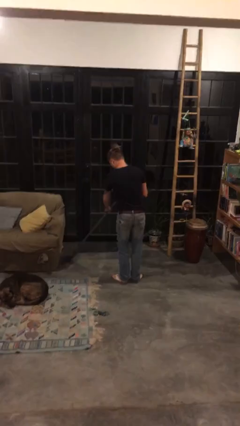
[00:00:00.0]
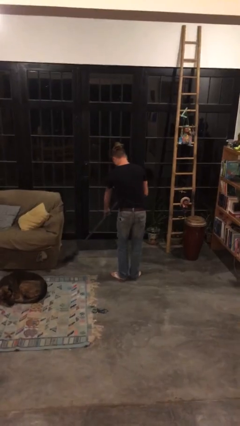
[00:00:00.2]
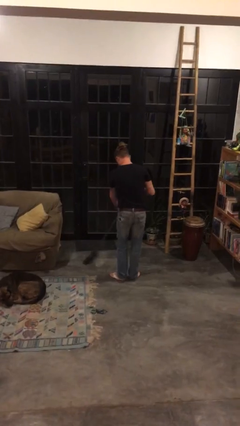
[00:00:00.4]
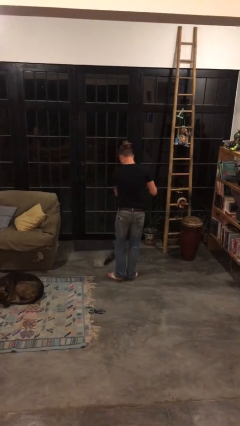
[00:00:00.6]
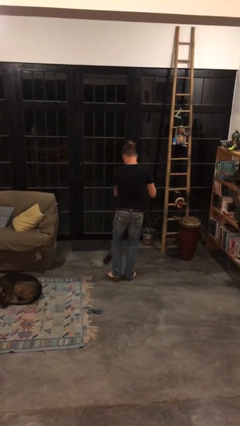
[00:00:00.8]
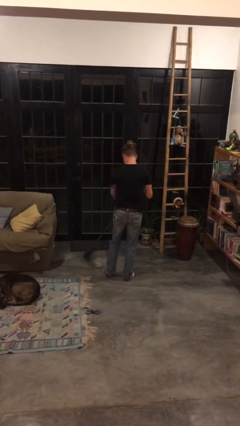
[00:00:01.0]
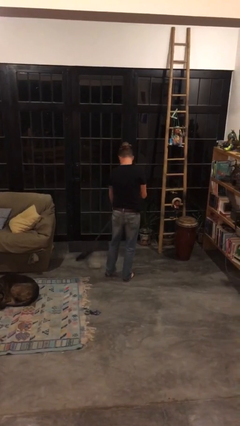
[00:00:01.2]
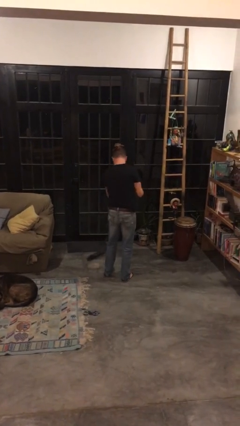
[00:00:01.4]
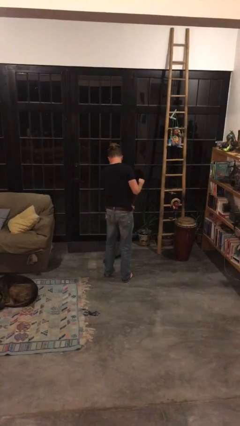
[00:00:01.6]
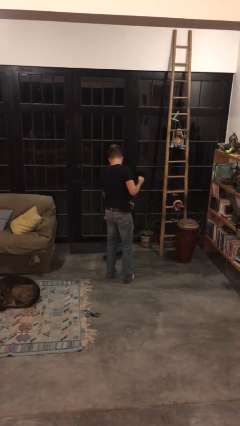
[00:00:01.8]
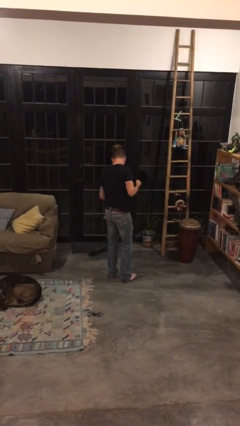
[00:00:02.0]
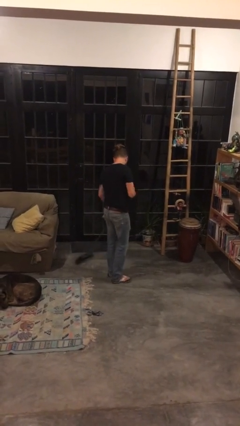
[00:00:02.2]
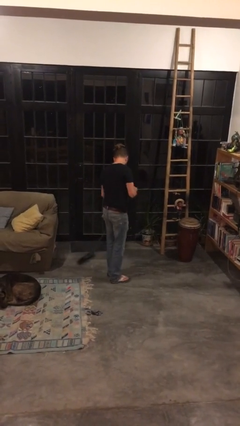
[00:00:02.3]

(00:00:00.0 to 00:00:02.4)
person sweeps floor

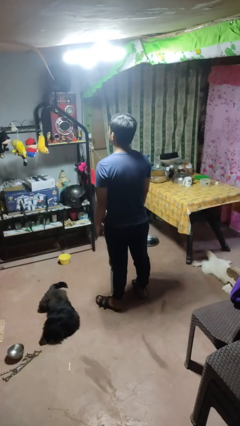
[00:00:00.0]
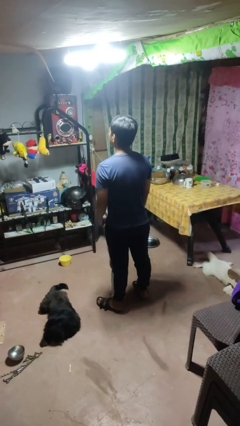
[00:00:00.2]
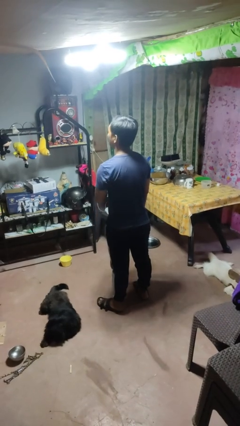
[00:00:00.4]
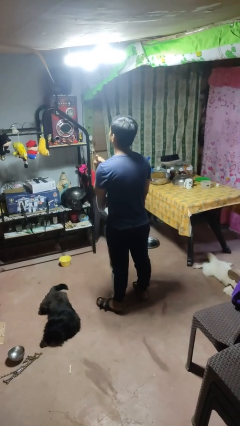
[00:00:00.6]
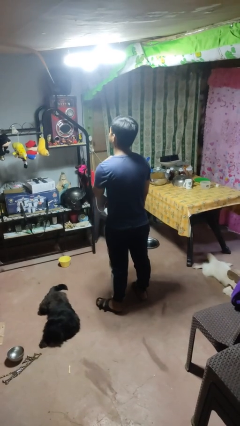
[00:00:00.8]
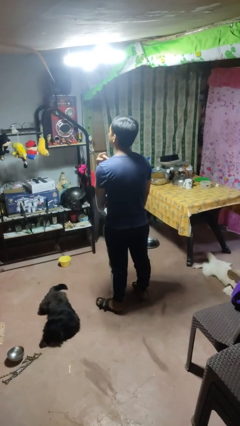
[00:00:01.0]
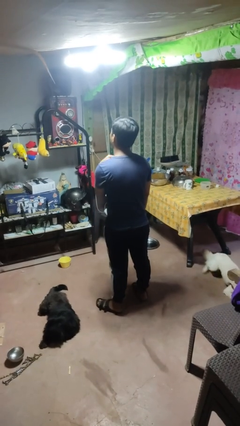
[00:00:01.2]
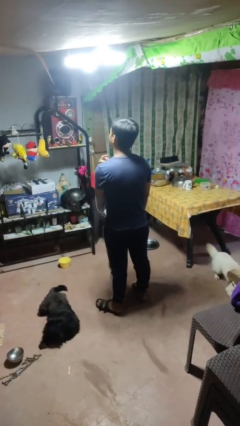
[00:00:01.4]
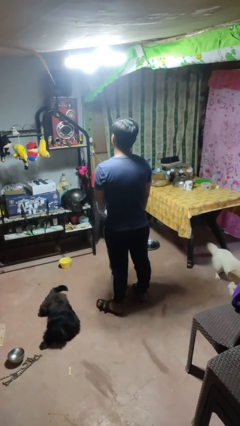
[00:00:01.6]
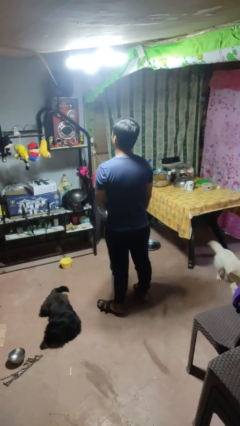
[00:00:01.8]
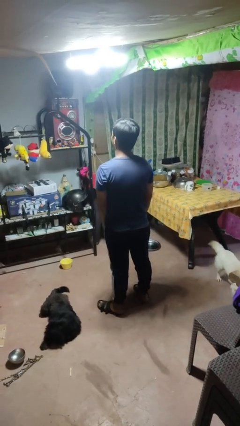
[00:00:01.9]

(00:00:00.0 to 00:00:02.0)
person gestures cut

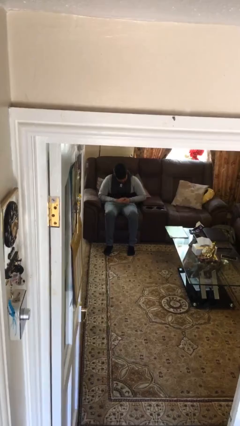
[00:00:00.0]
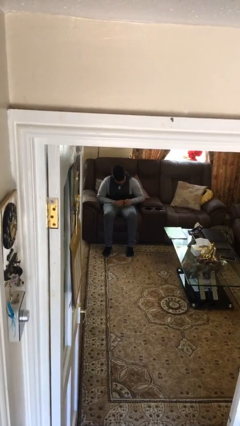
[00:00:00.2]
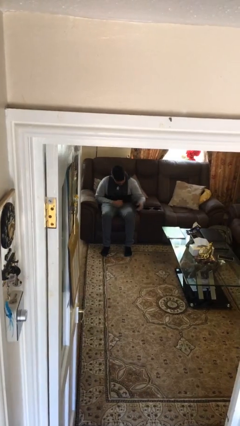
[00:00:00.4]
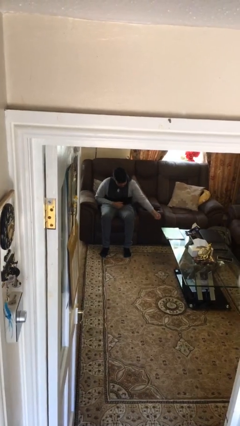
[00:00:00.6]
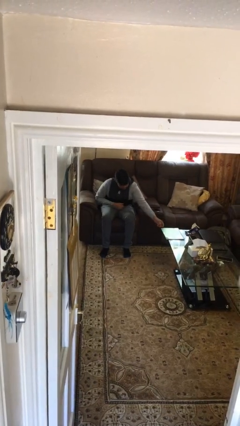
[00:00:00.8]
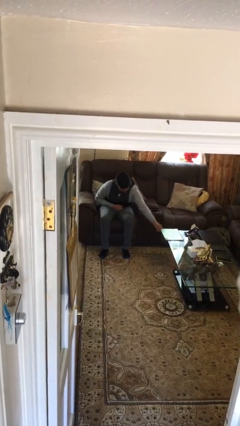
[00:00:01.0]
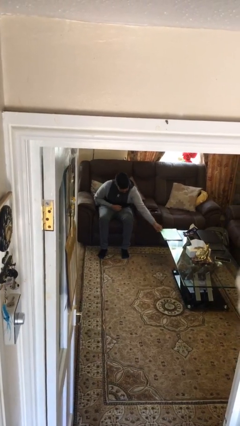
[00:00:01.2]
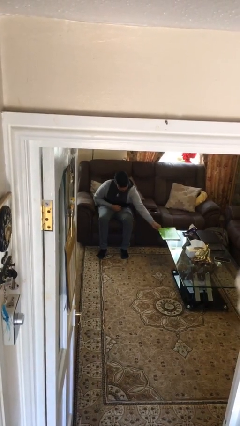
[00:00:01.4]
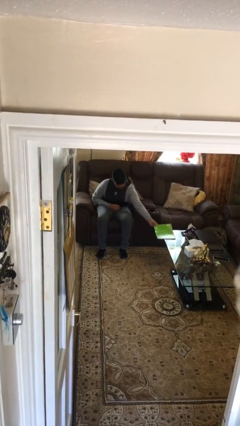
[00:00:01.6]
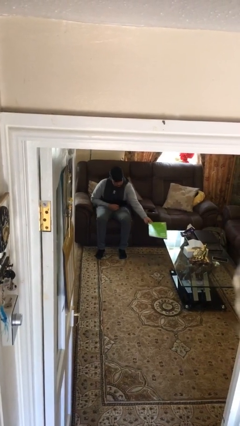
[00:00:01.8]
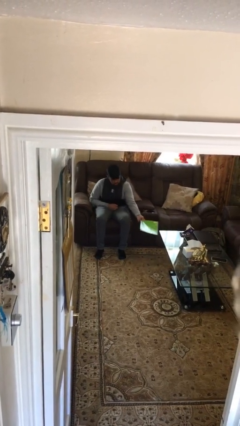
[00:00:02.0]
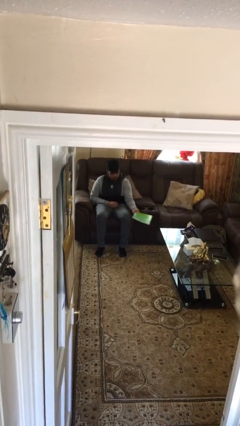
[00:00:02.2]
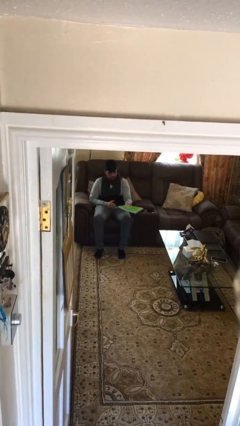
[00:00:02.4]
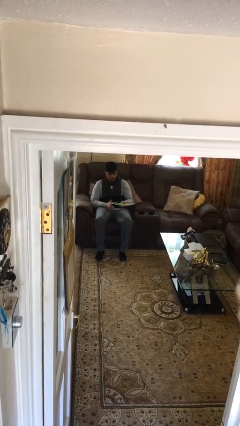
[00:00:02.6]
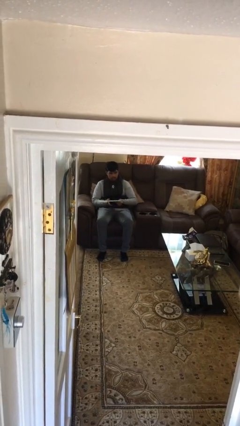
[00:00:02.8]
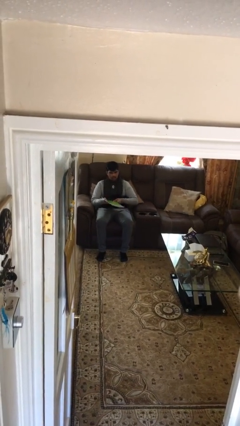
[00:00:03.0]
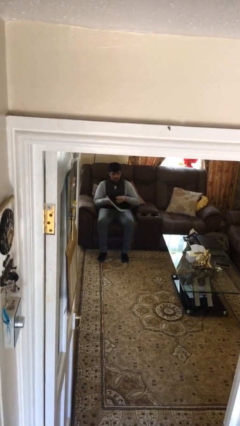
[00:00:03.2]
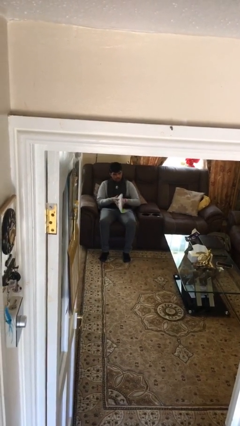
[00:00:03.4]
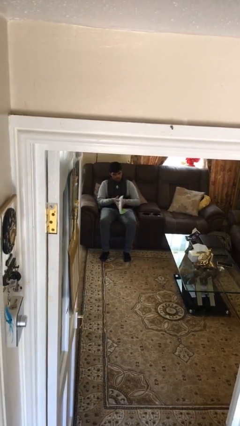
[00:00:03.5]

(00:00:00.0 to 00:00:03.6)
person picks up object from table

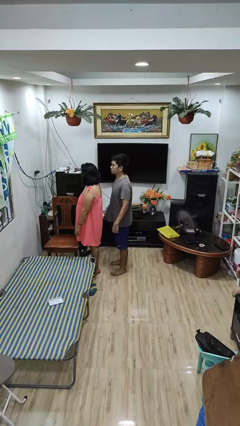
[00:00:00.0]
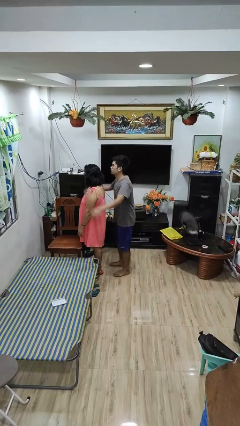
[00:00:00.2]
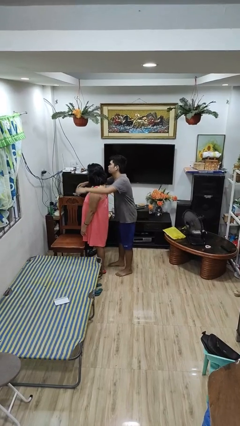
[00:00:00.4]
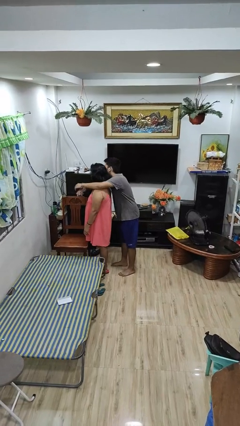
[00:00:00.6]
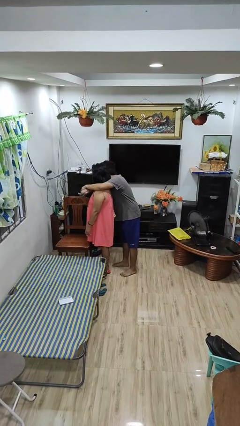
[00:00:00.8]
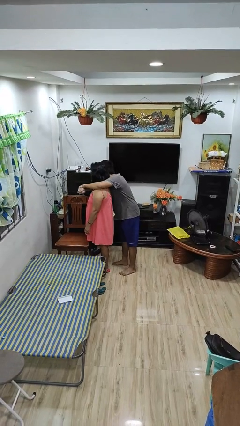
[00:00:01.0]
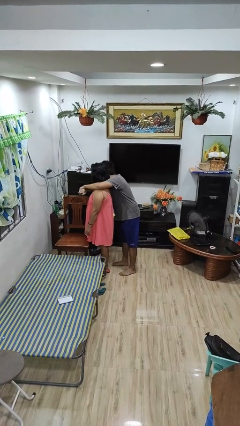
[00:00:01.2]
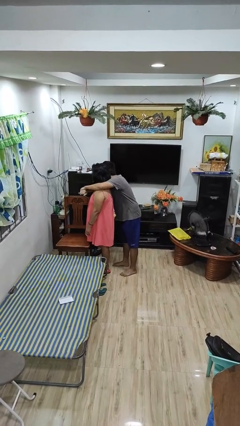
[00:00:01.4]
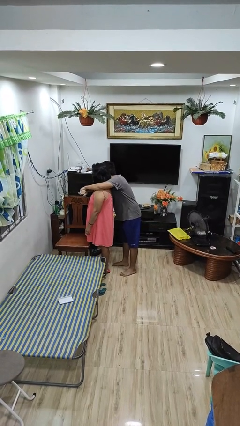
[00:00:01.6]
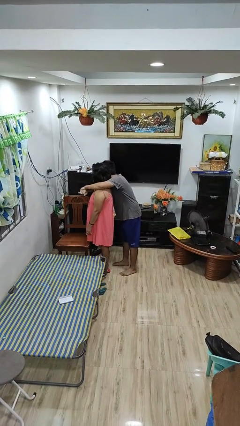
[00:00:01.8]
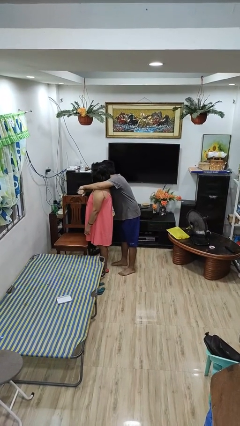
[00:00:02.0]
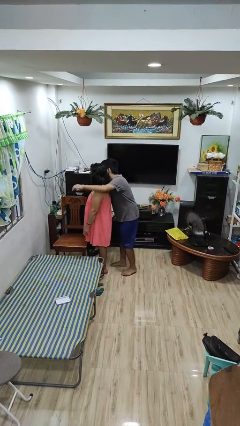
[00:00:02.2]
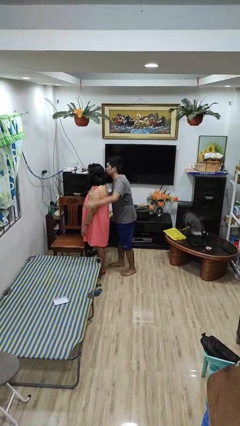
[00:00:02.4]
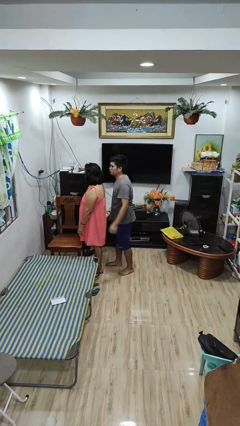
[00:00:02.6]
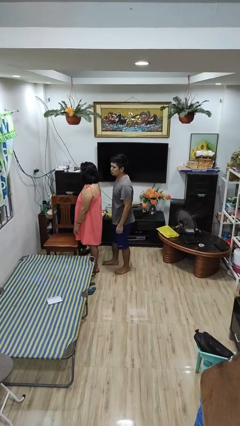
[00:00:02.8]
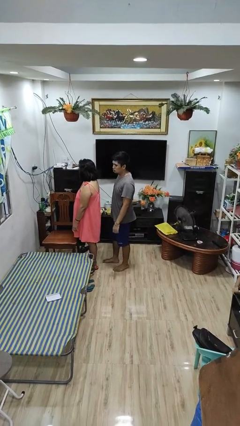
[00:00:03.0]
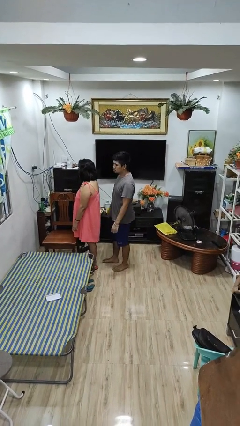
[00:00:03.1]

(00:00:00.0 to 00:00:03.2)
person hugs person from behind

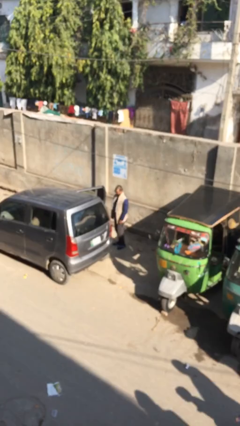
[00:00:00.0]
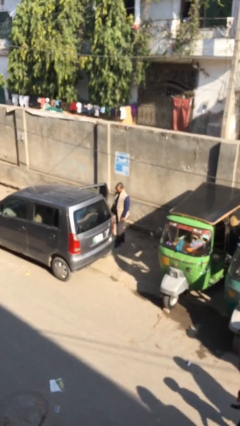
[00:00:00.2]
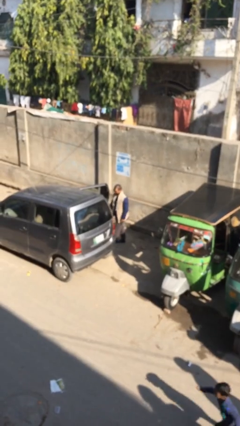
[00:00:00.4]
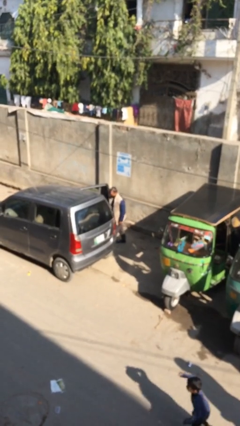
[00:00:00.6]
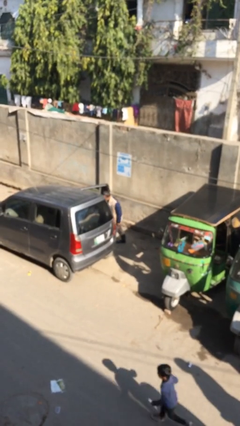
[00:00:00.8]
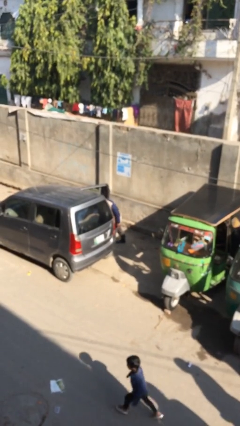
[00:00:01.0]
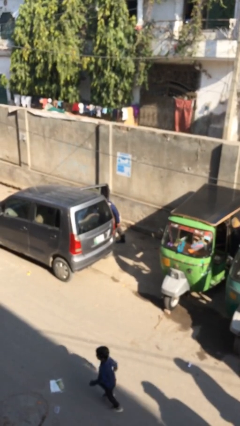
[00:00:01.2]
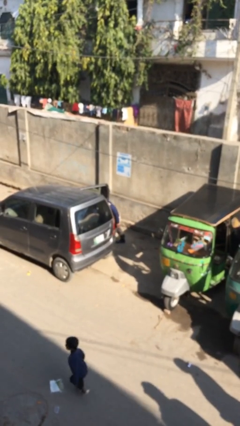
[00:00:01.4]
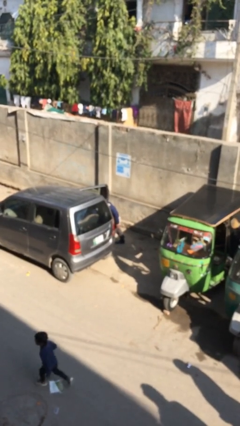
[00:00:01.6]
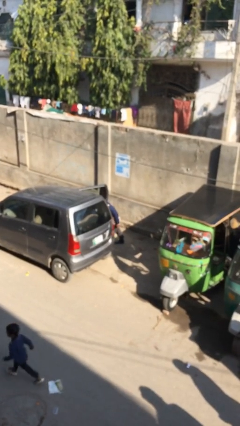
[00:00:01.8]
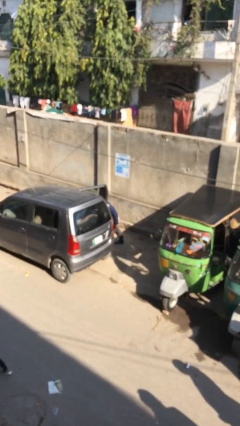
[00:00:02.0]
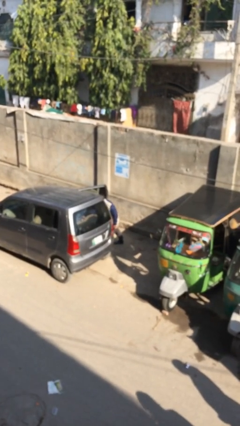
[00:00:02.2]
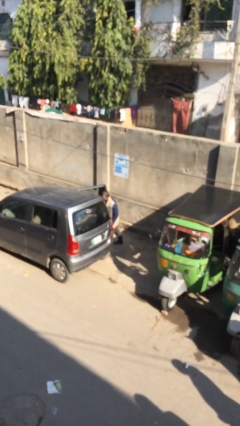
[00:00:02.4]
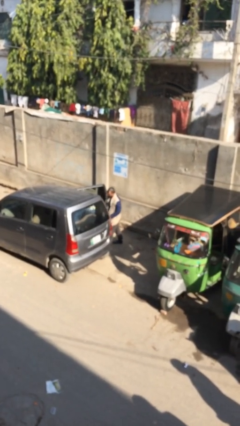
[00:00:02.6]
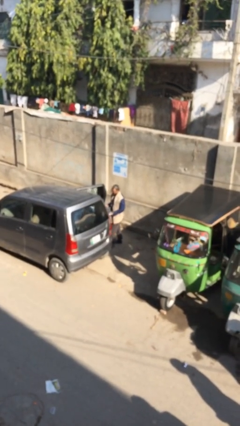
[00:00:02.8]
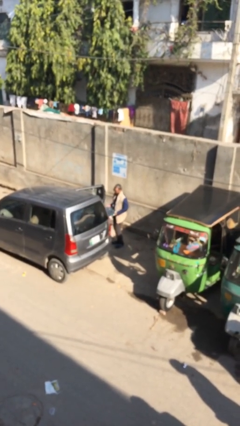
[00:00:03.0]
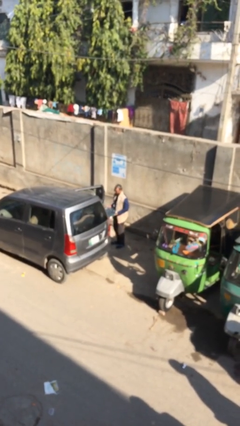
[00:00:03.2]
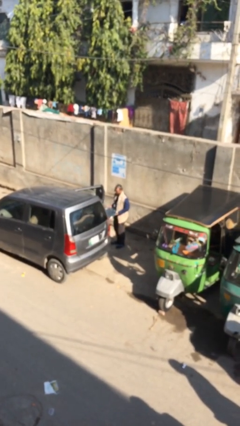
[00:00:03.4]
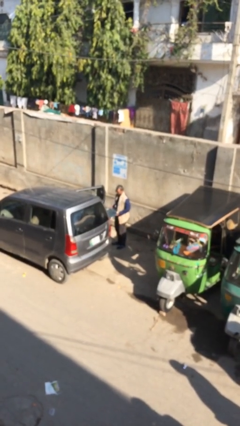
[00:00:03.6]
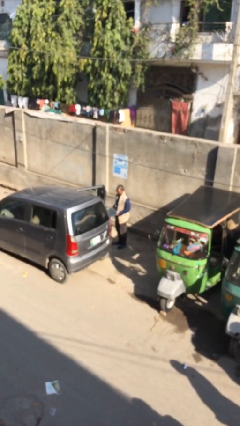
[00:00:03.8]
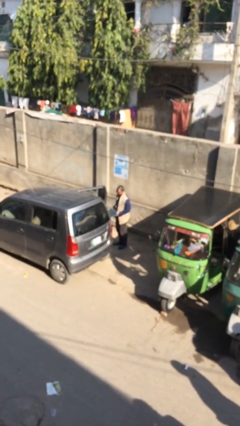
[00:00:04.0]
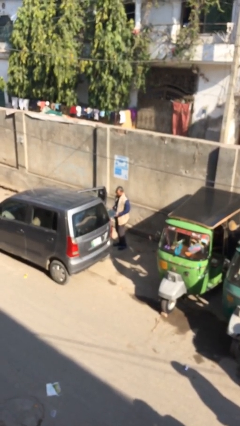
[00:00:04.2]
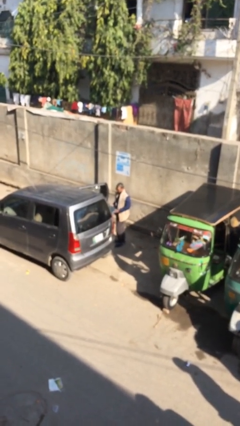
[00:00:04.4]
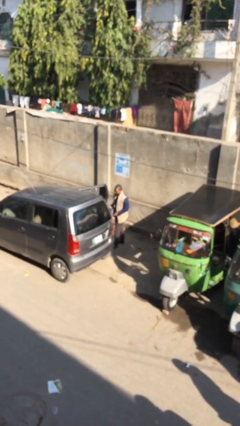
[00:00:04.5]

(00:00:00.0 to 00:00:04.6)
person unloads car

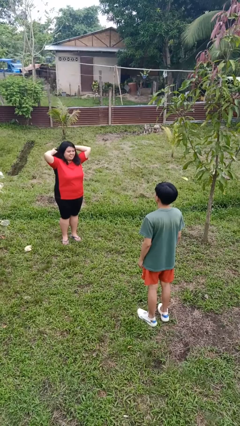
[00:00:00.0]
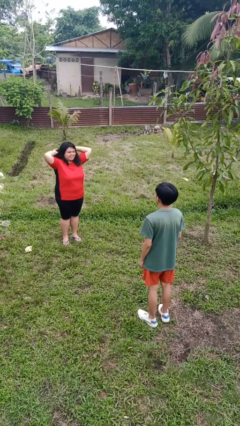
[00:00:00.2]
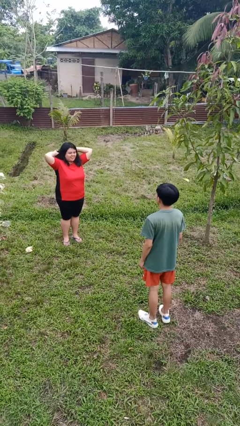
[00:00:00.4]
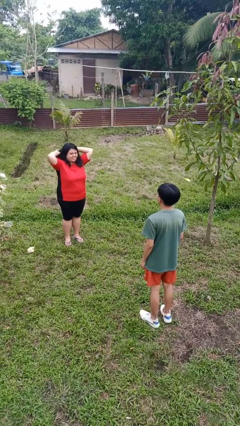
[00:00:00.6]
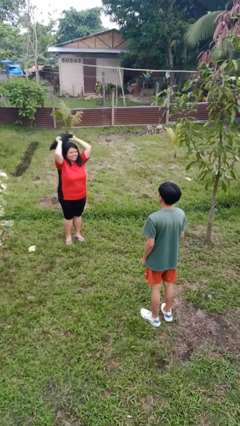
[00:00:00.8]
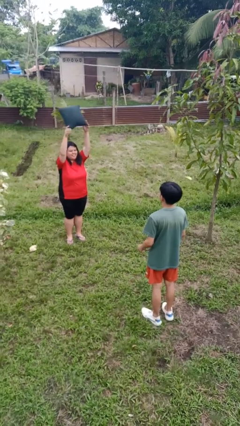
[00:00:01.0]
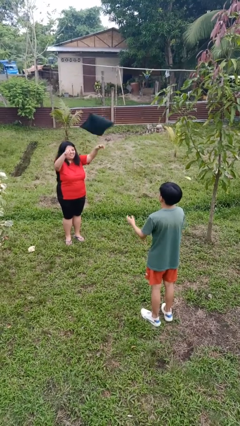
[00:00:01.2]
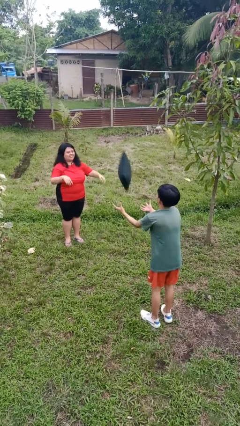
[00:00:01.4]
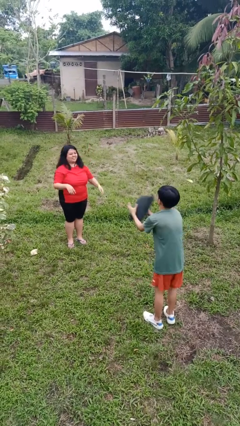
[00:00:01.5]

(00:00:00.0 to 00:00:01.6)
person throws object to person
